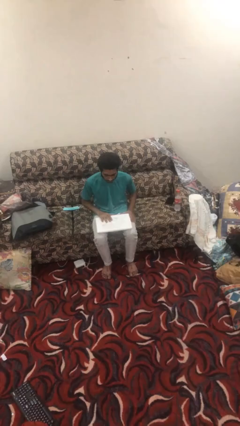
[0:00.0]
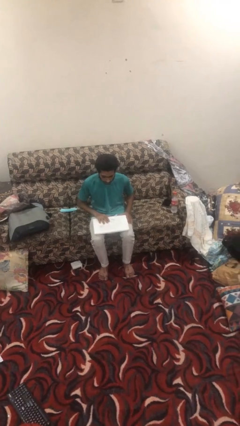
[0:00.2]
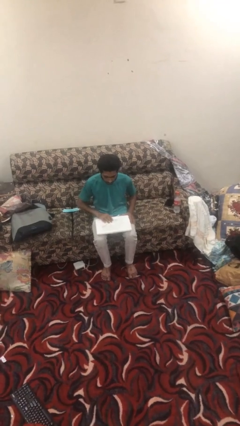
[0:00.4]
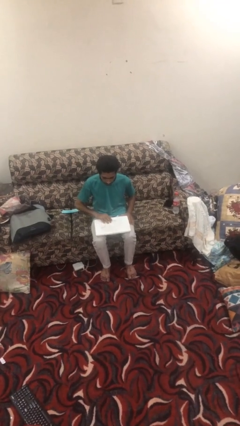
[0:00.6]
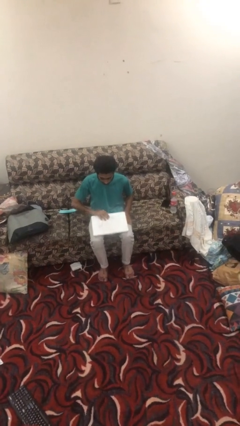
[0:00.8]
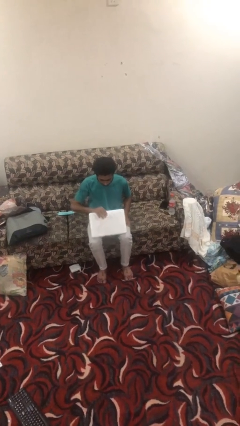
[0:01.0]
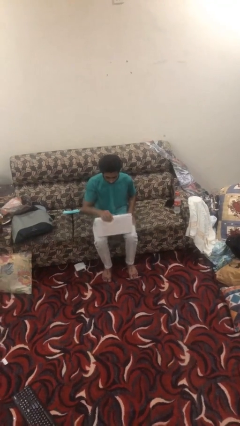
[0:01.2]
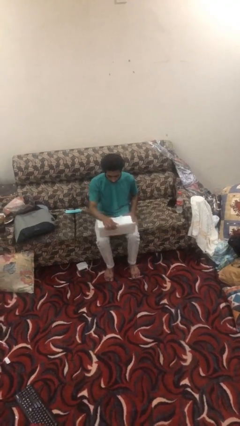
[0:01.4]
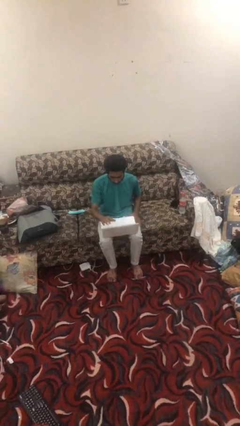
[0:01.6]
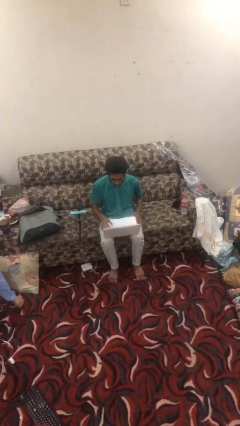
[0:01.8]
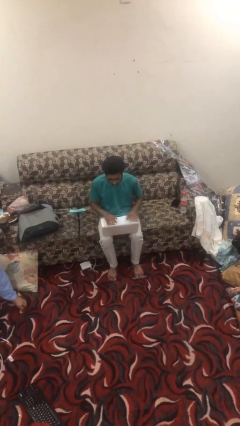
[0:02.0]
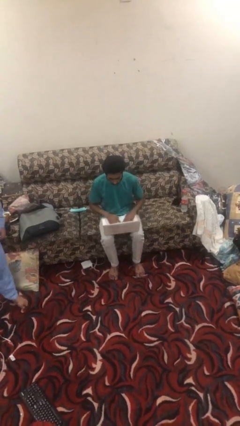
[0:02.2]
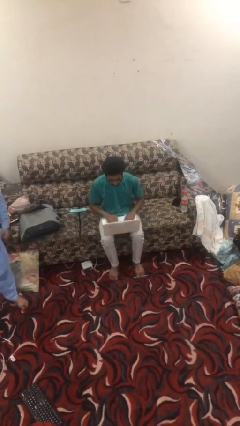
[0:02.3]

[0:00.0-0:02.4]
person opens laptop

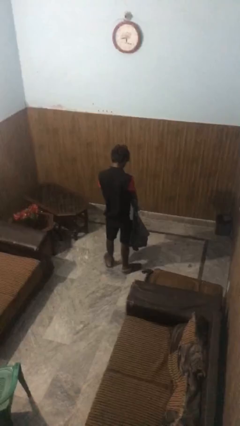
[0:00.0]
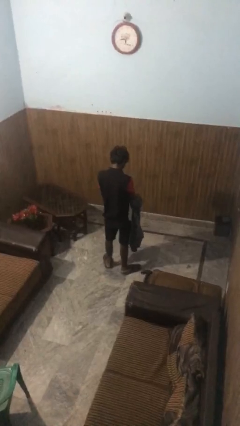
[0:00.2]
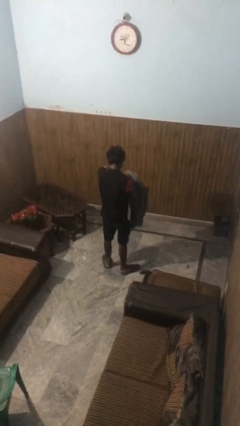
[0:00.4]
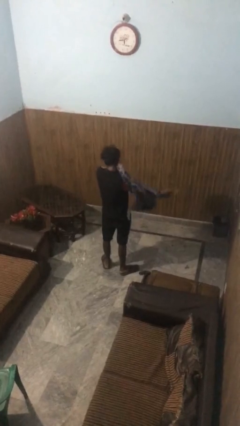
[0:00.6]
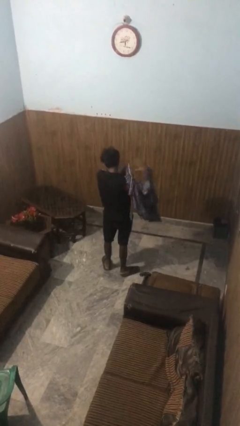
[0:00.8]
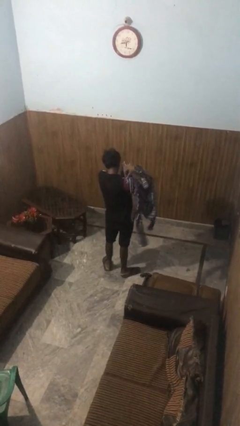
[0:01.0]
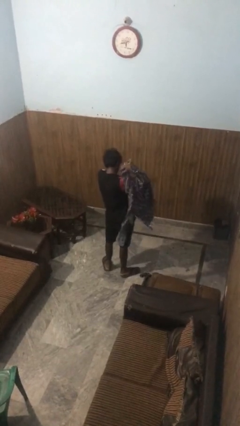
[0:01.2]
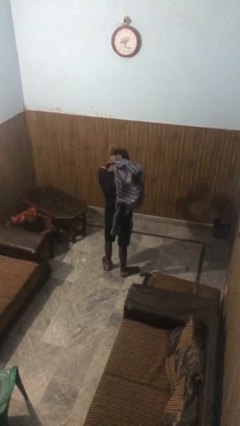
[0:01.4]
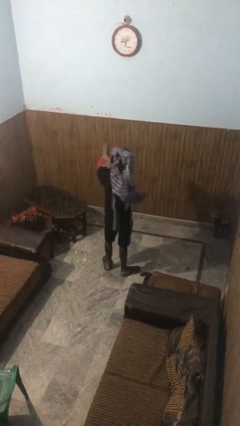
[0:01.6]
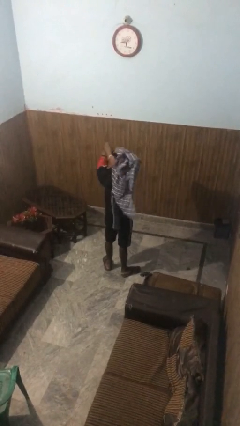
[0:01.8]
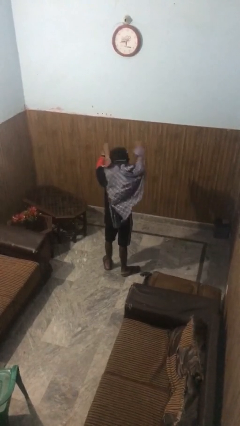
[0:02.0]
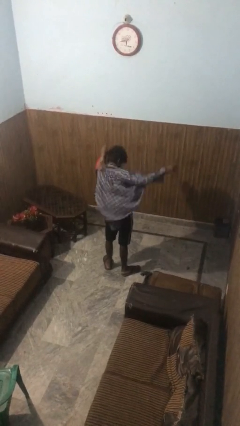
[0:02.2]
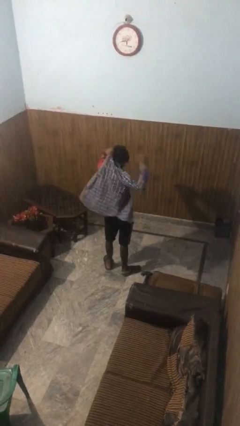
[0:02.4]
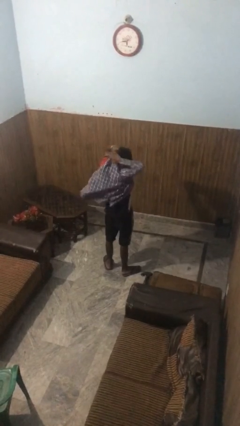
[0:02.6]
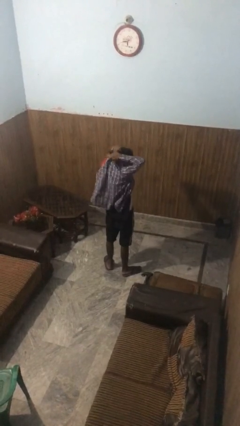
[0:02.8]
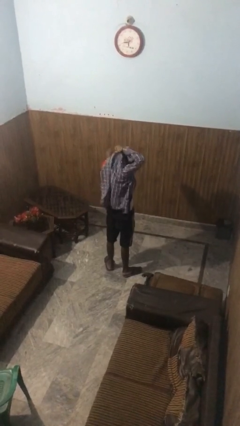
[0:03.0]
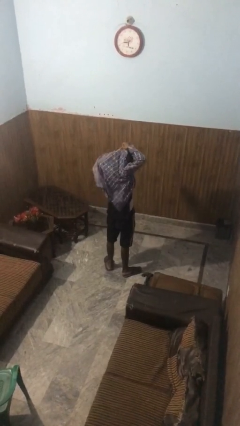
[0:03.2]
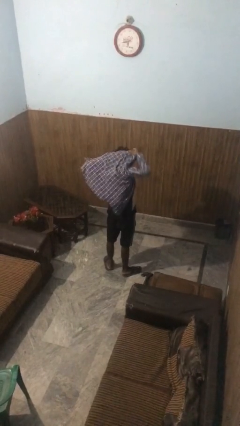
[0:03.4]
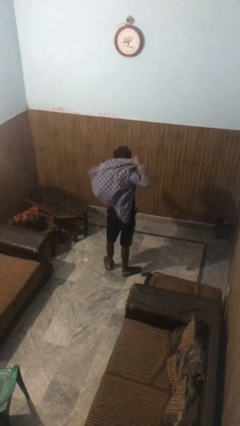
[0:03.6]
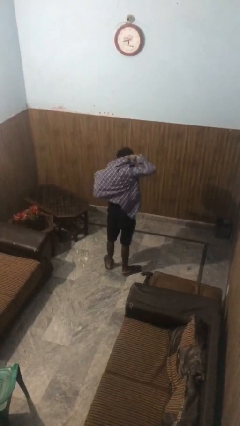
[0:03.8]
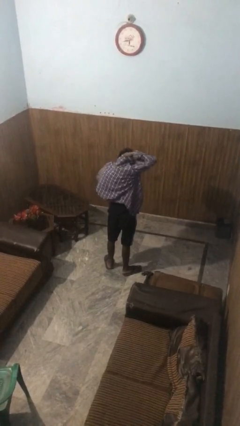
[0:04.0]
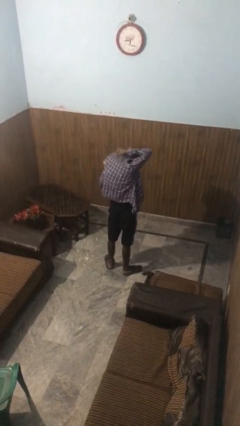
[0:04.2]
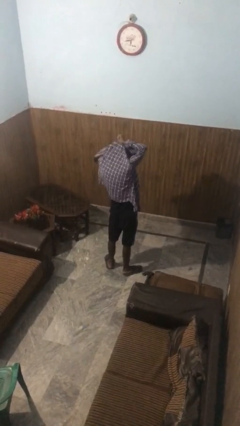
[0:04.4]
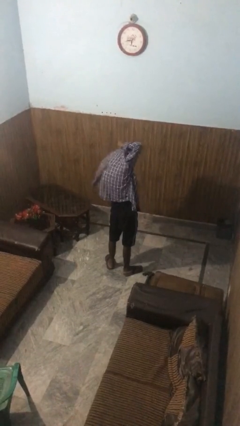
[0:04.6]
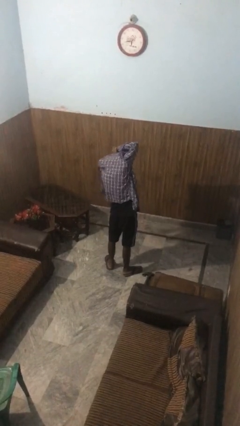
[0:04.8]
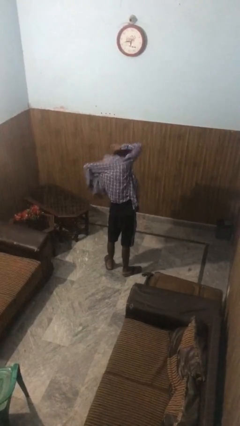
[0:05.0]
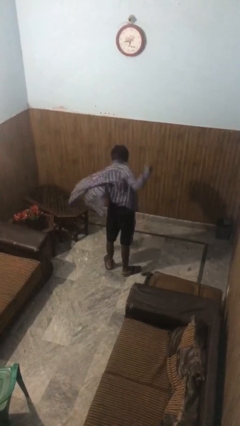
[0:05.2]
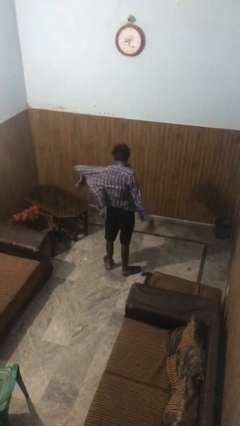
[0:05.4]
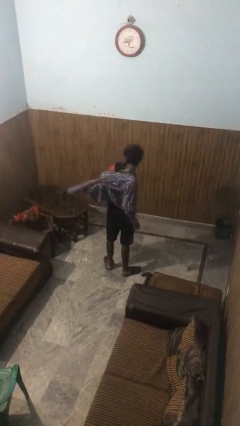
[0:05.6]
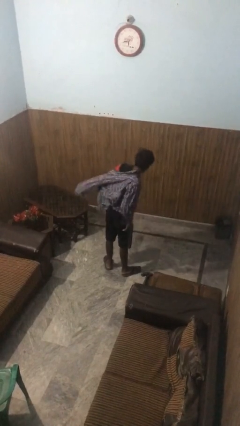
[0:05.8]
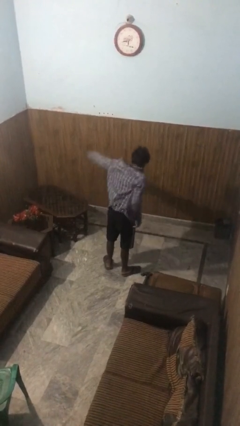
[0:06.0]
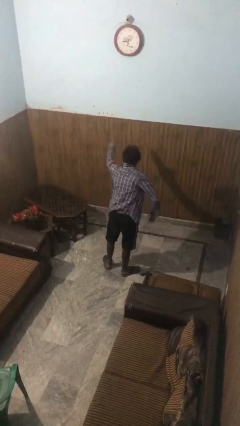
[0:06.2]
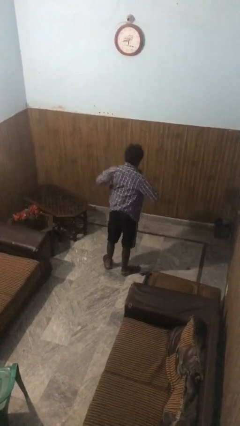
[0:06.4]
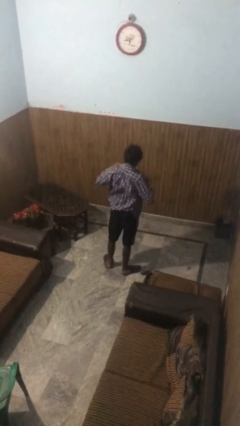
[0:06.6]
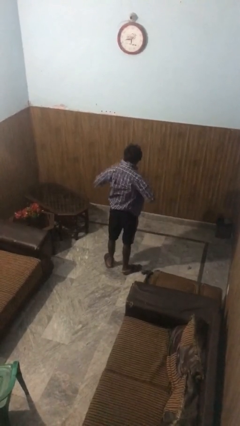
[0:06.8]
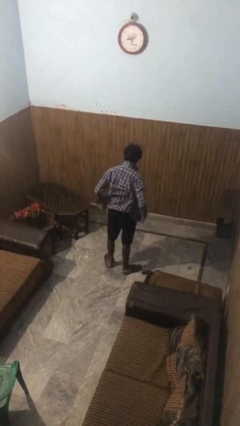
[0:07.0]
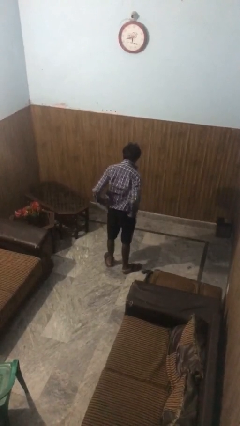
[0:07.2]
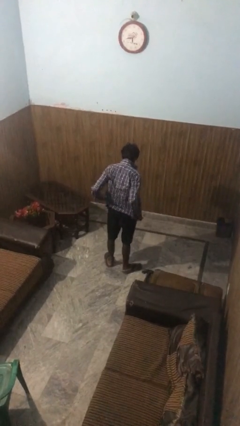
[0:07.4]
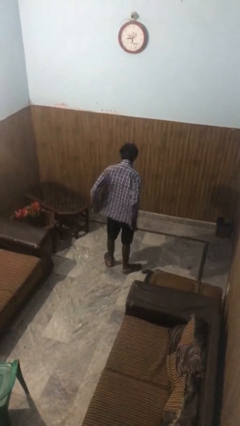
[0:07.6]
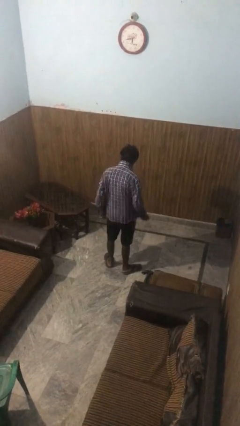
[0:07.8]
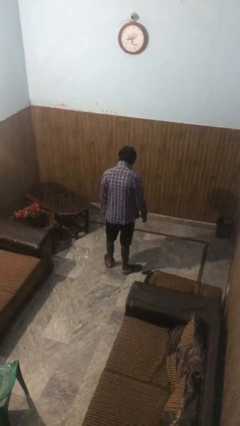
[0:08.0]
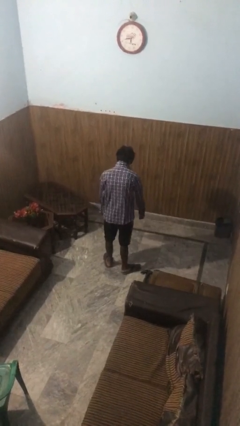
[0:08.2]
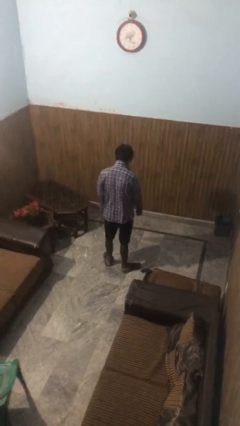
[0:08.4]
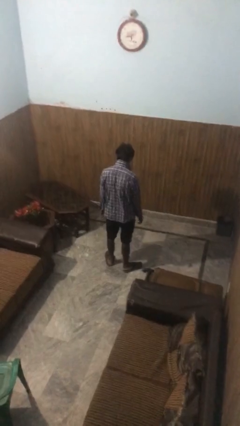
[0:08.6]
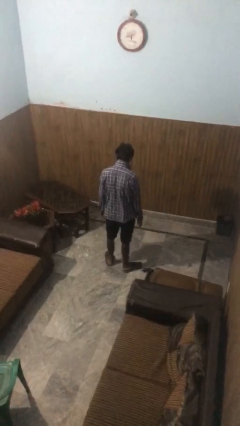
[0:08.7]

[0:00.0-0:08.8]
person puts on shirt

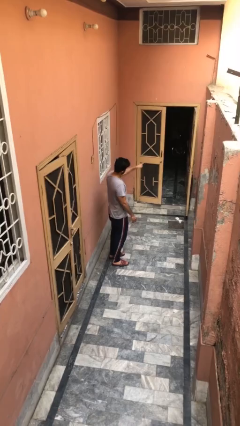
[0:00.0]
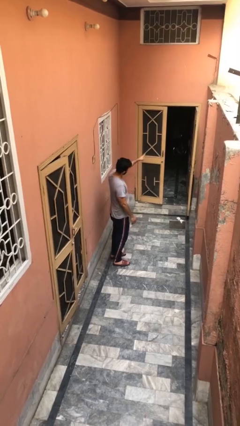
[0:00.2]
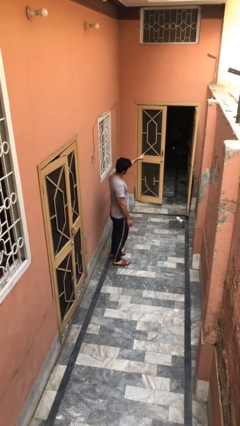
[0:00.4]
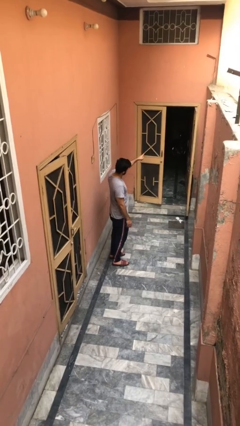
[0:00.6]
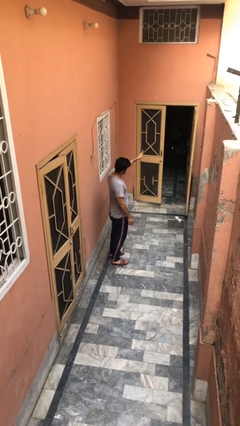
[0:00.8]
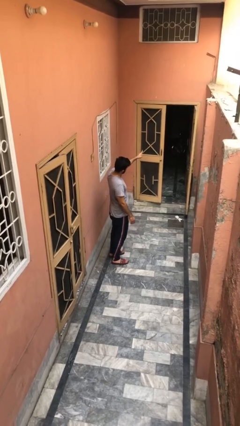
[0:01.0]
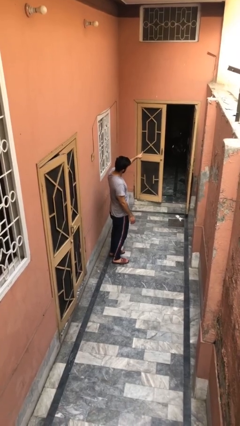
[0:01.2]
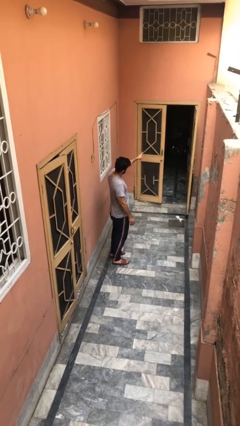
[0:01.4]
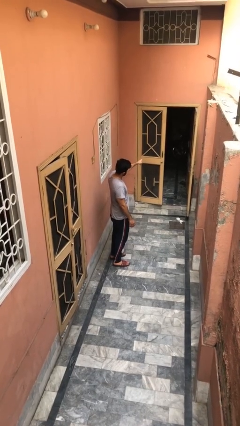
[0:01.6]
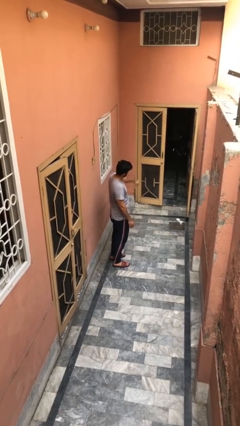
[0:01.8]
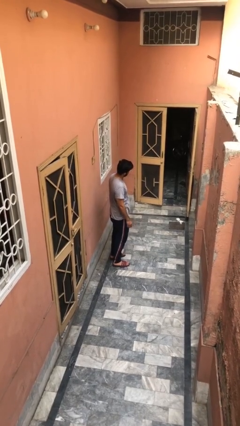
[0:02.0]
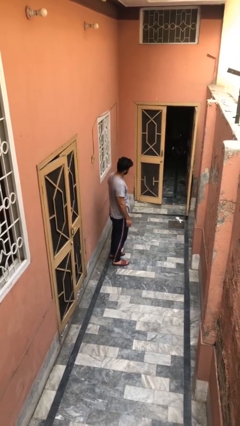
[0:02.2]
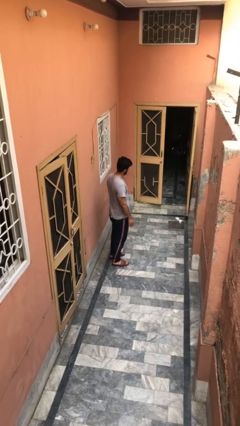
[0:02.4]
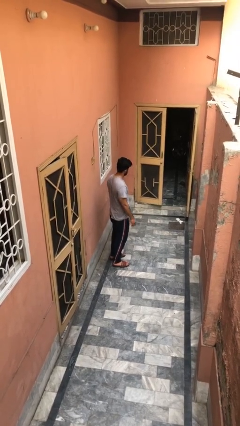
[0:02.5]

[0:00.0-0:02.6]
person points at person

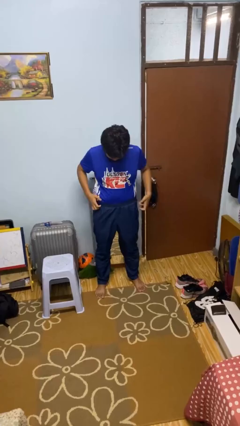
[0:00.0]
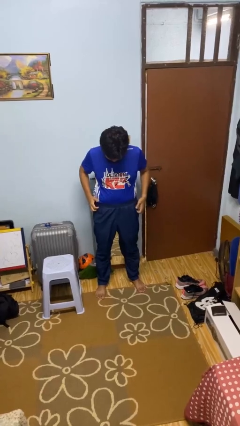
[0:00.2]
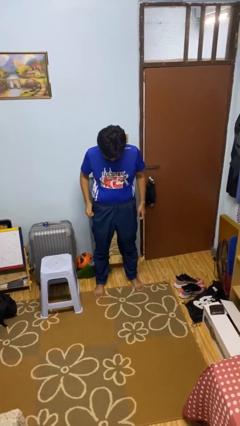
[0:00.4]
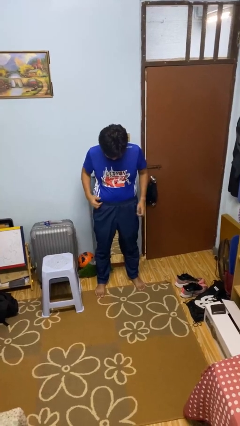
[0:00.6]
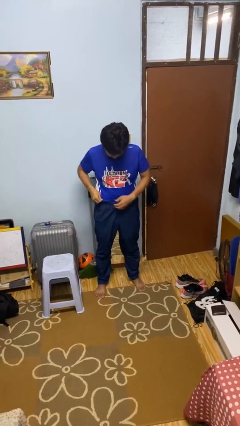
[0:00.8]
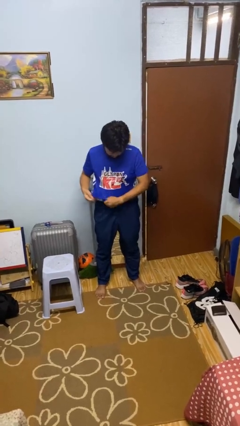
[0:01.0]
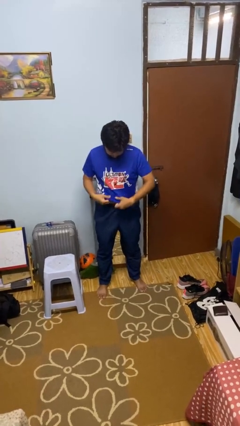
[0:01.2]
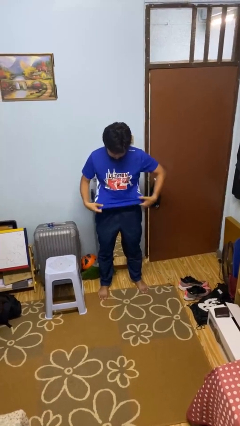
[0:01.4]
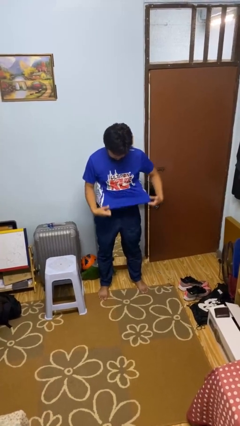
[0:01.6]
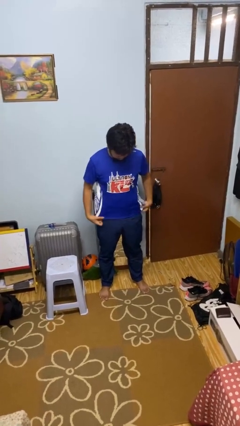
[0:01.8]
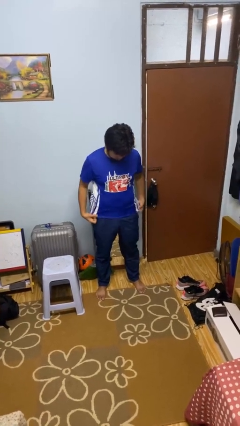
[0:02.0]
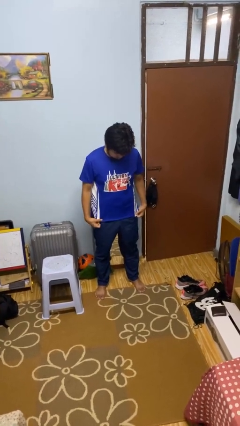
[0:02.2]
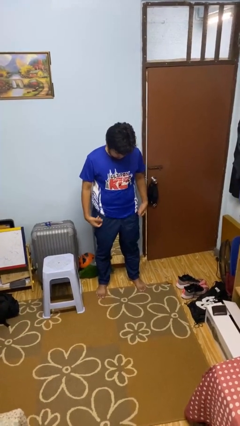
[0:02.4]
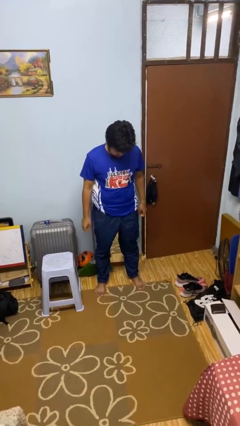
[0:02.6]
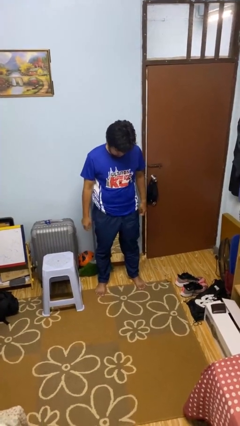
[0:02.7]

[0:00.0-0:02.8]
person untucks shirt

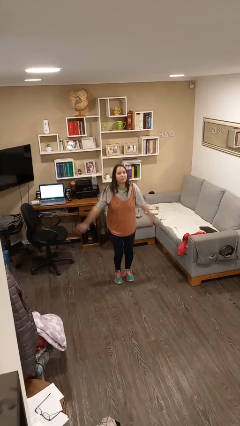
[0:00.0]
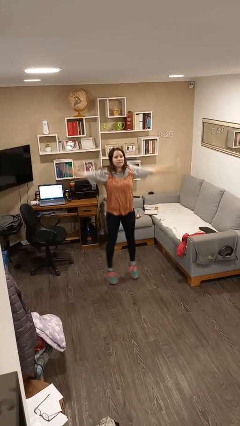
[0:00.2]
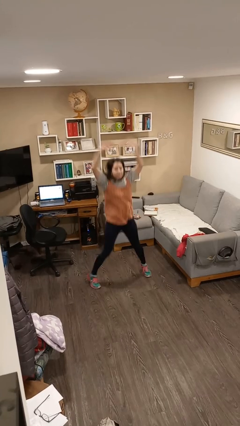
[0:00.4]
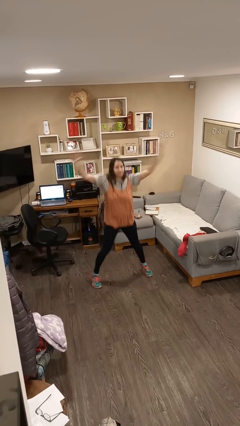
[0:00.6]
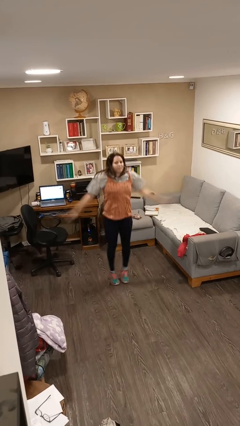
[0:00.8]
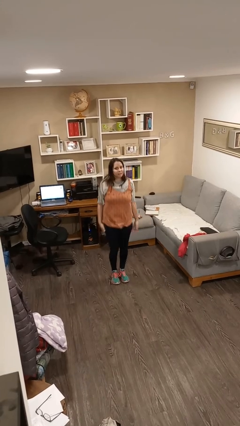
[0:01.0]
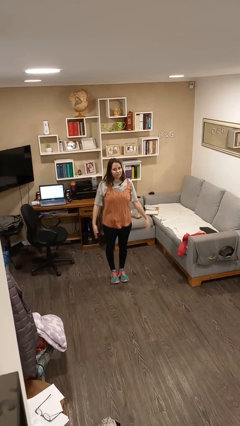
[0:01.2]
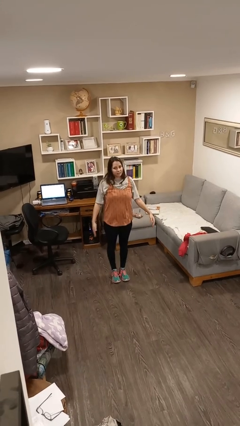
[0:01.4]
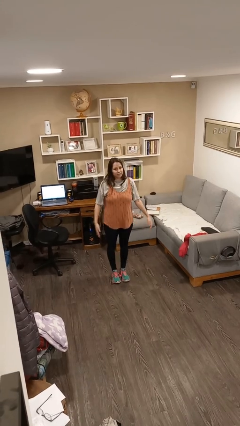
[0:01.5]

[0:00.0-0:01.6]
person exercises with jumping jacks
